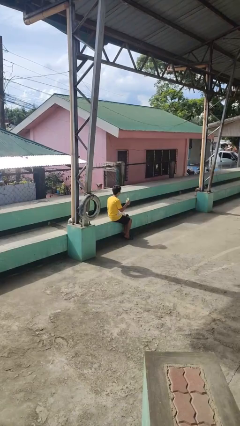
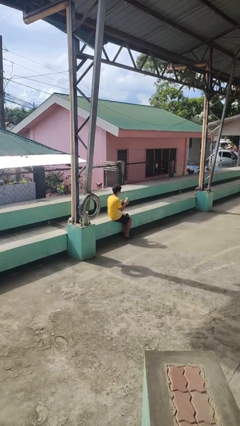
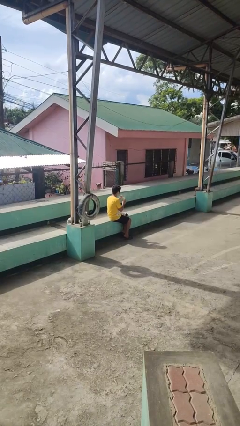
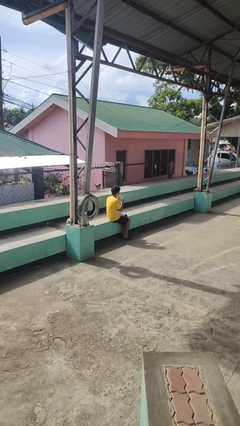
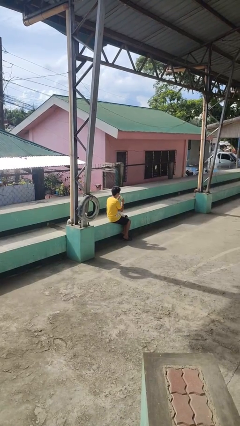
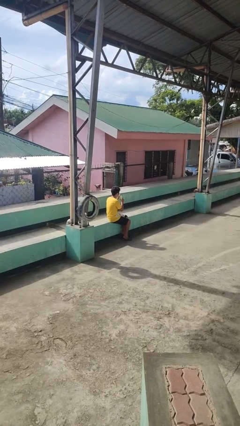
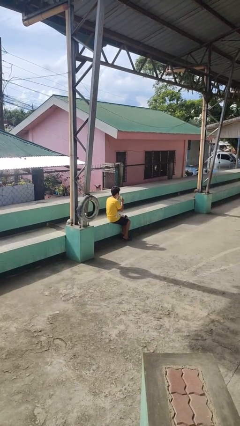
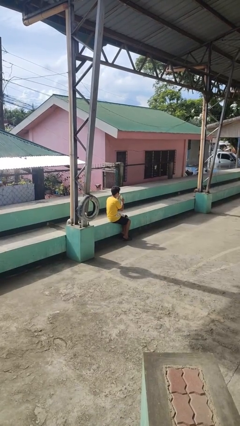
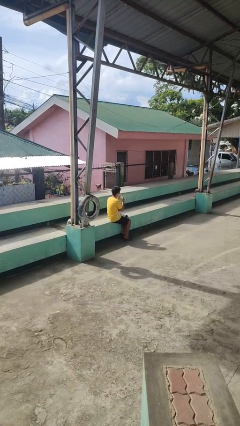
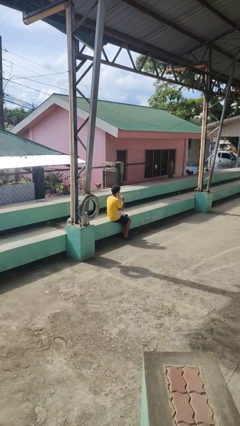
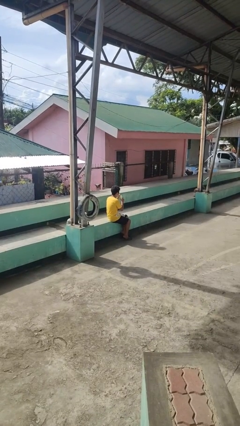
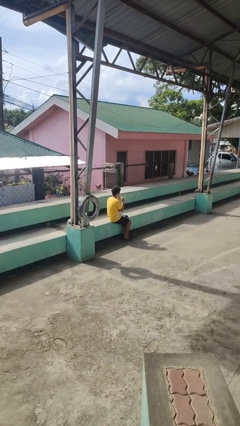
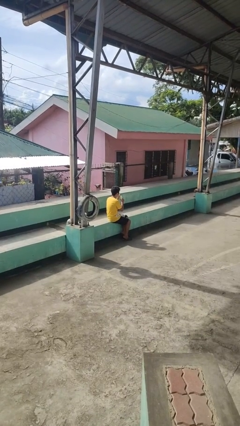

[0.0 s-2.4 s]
person drinks from straw

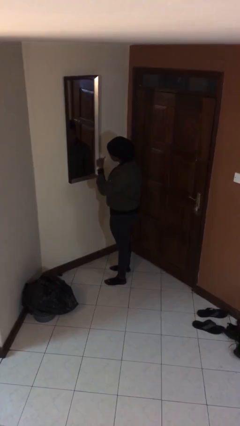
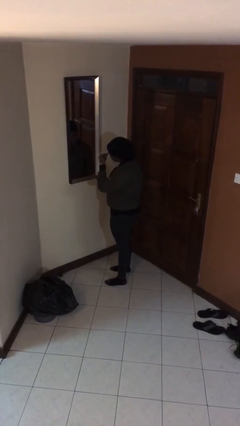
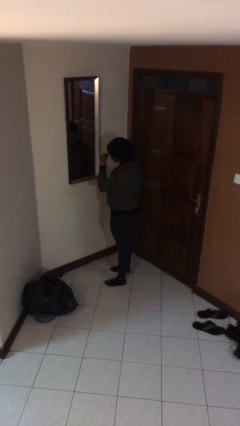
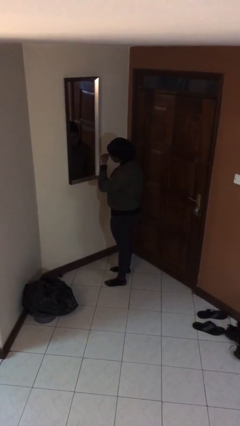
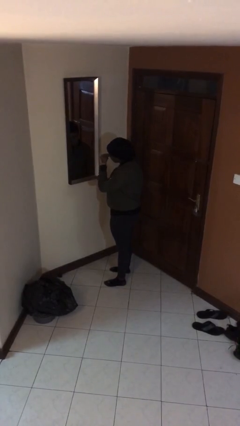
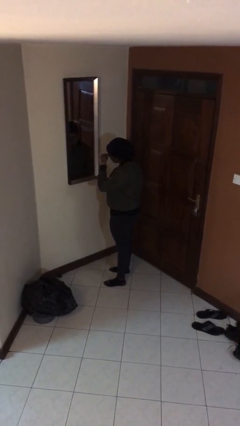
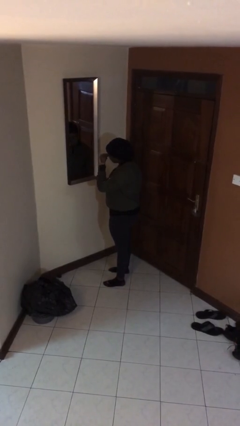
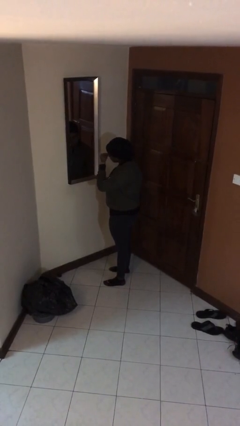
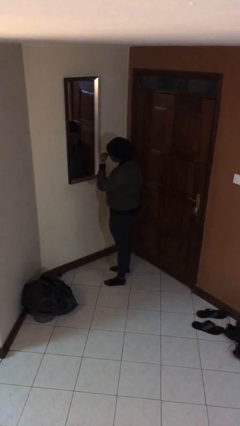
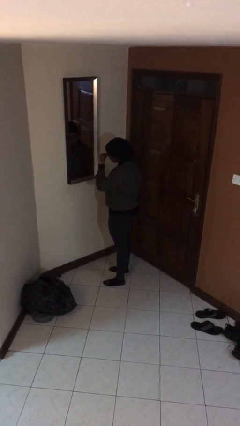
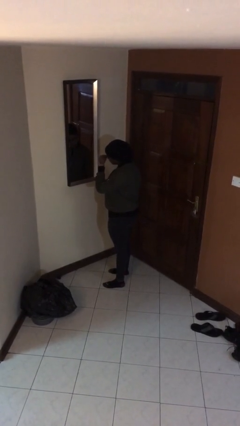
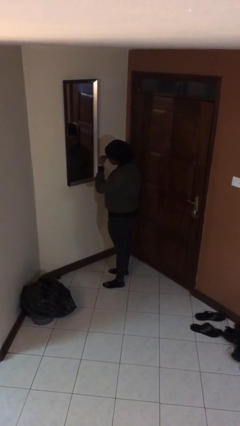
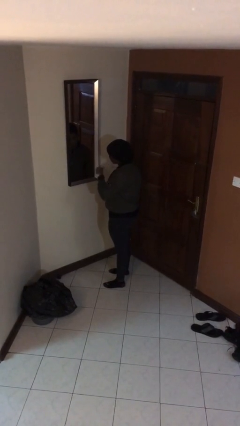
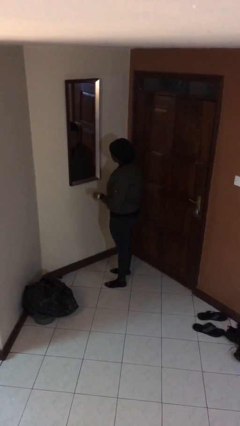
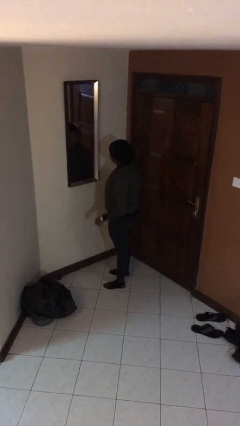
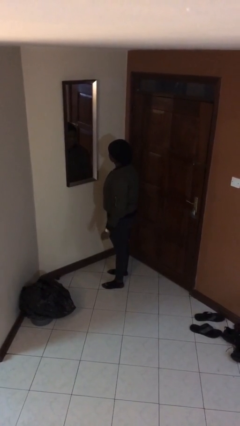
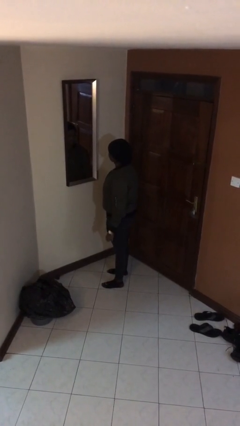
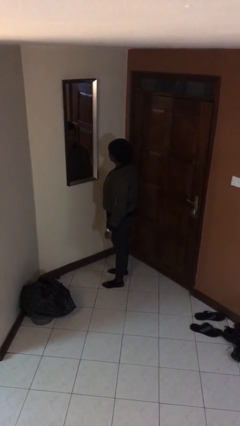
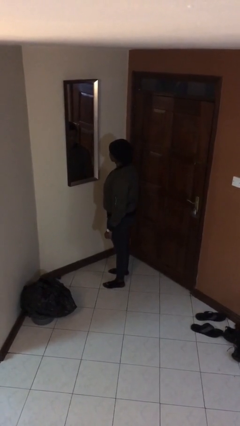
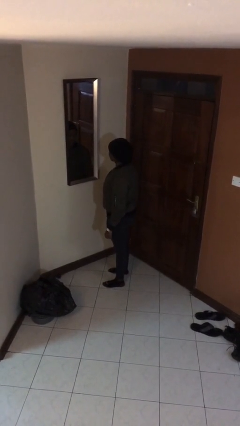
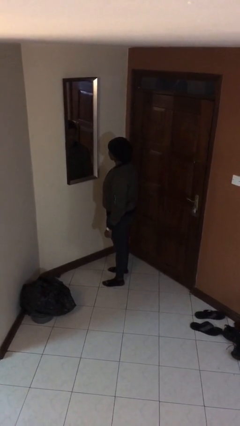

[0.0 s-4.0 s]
person applies eye makeup

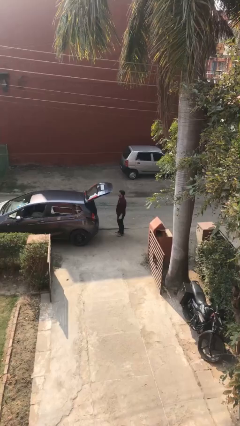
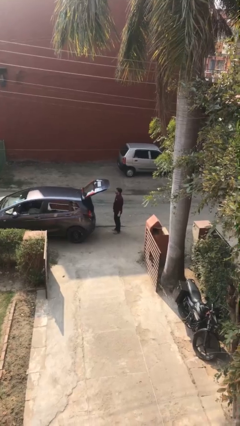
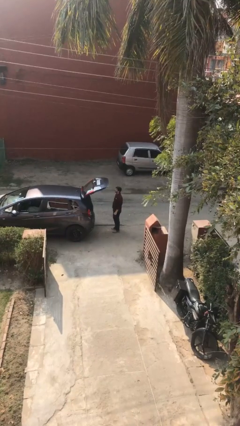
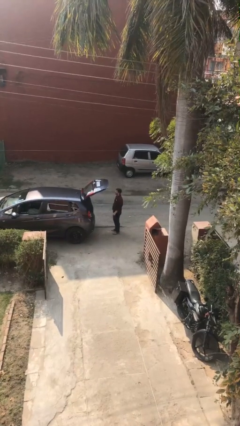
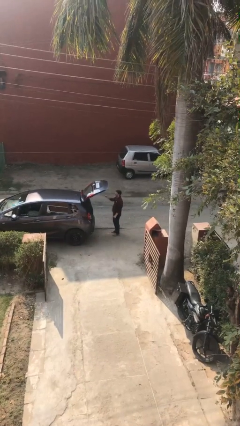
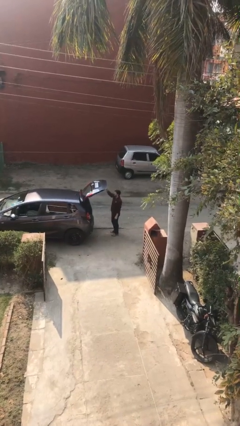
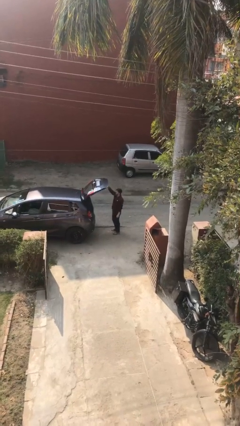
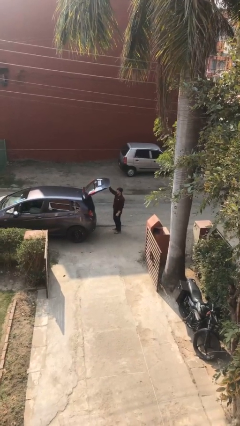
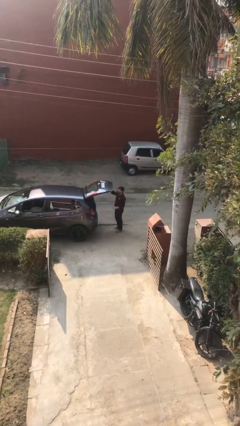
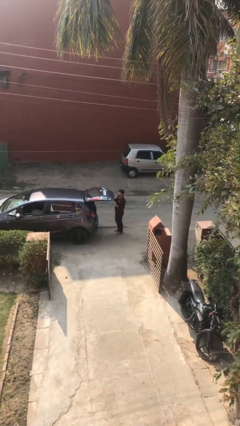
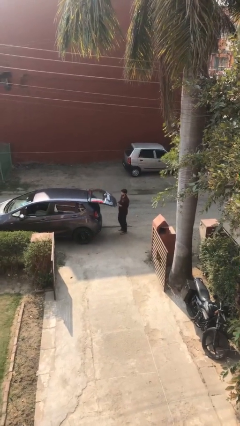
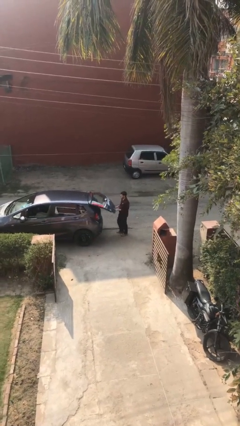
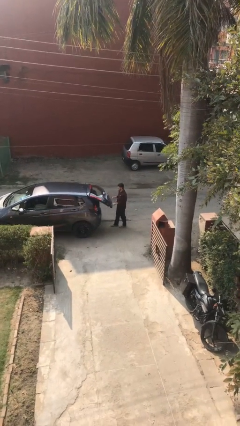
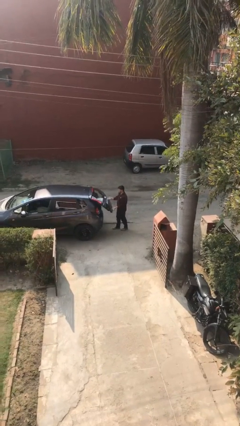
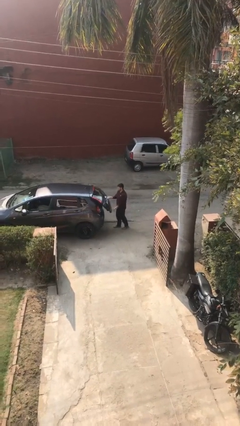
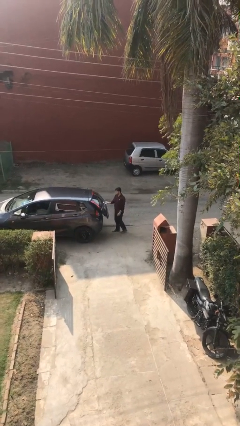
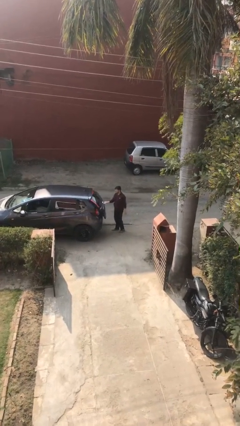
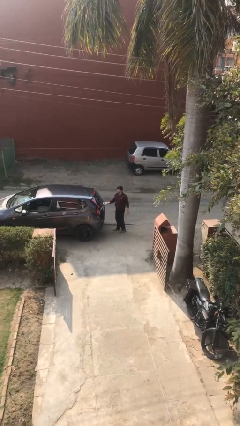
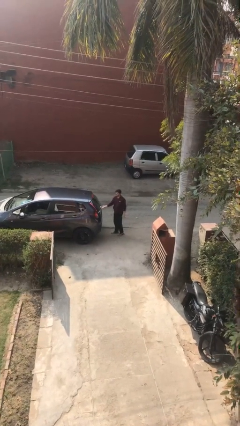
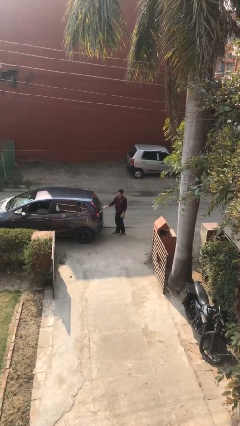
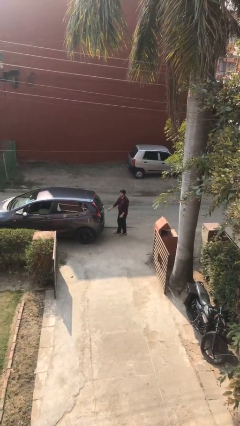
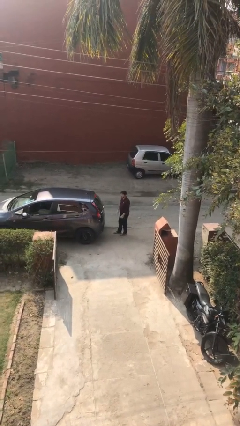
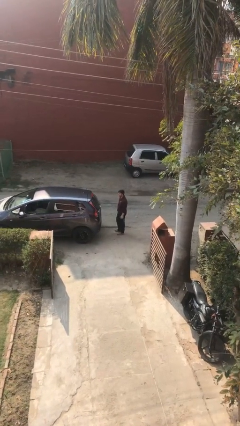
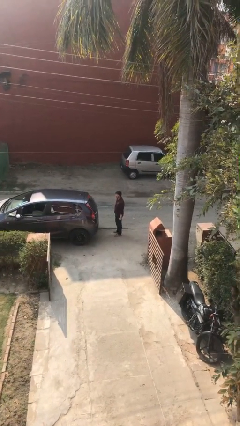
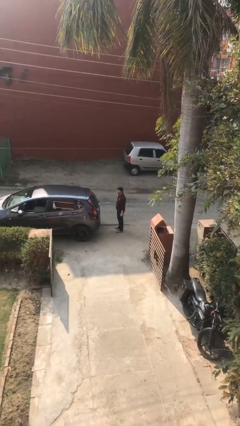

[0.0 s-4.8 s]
person closes car trunk

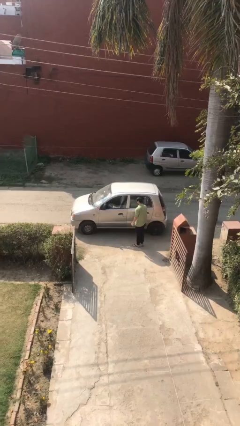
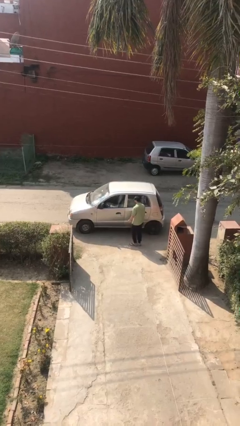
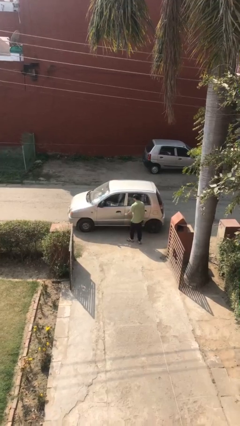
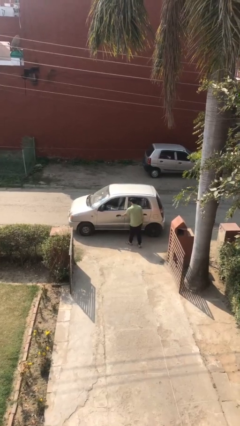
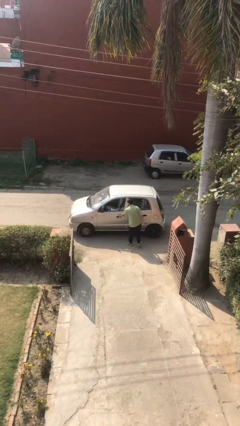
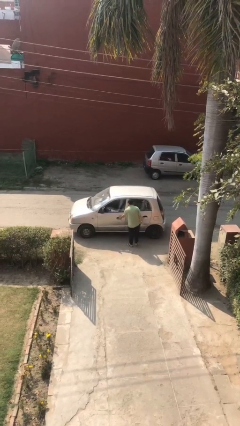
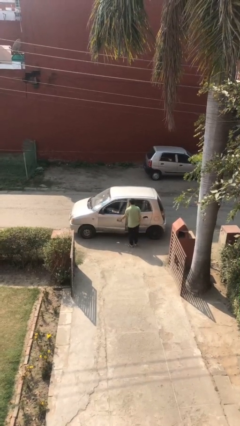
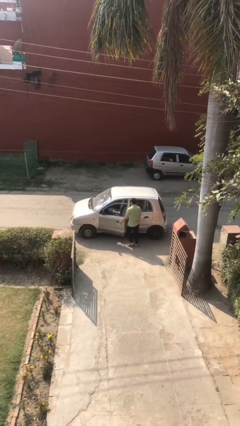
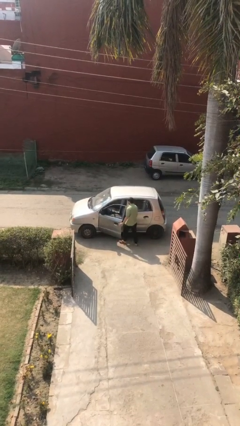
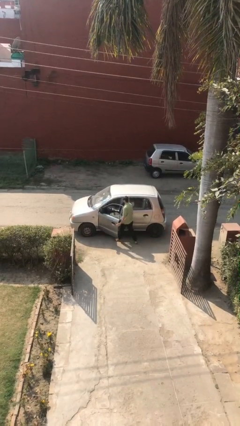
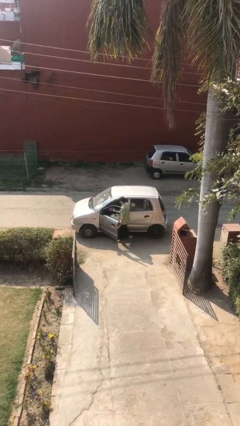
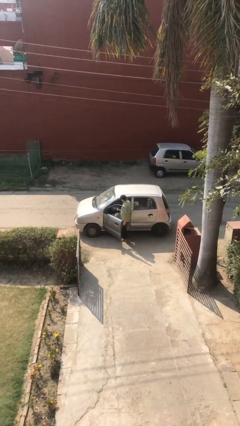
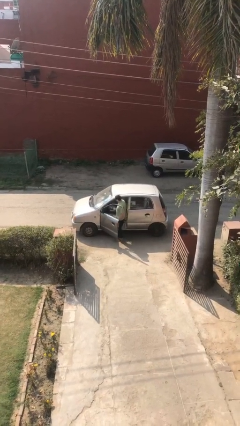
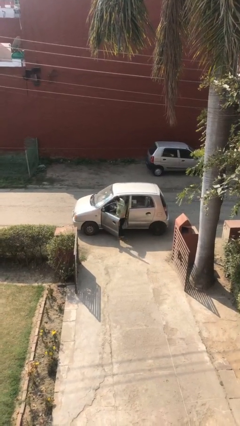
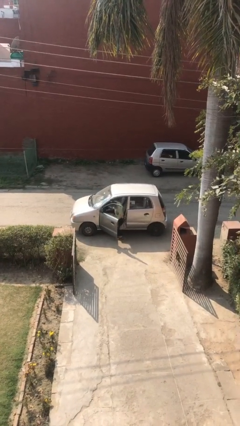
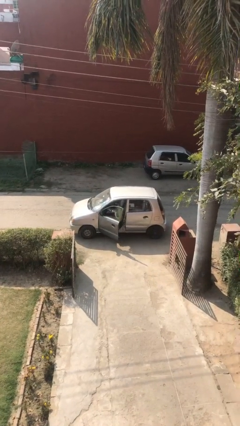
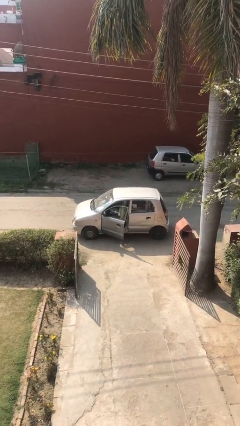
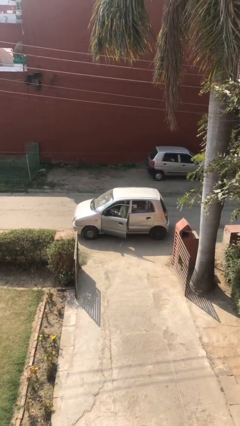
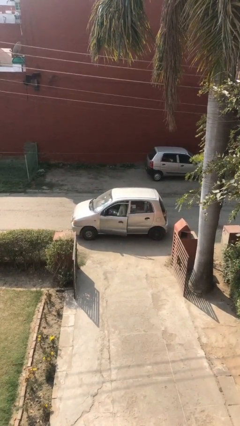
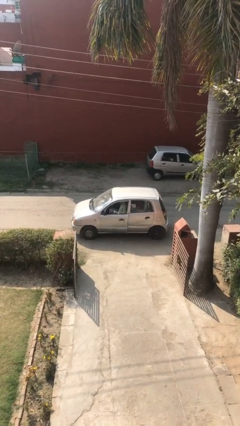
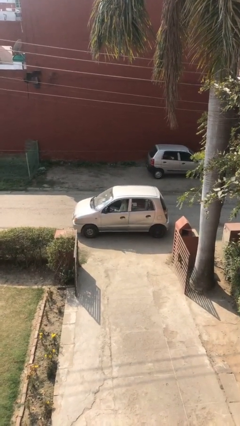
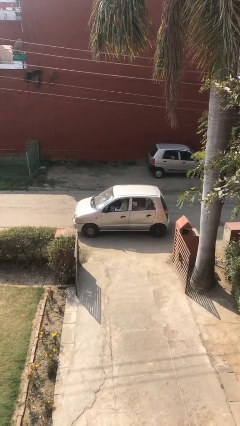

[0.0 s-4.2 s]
car picks up person

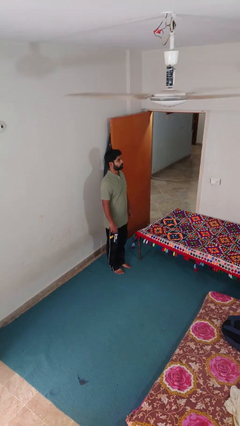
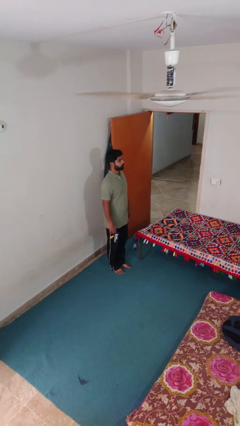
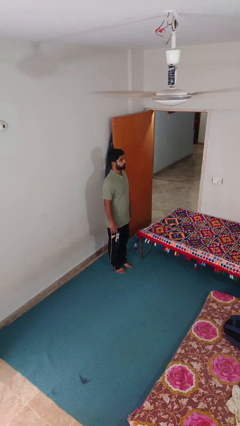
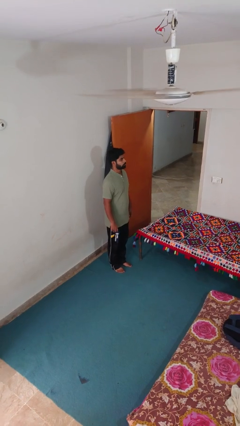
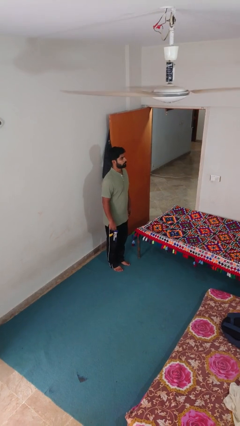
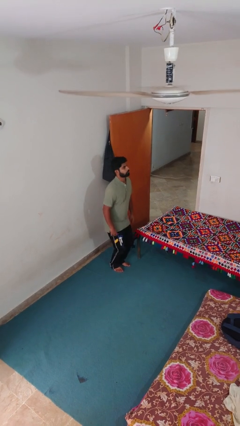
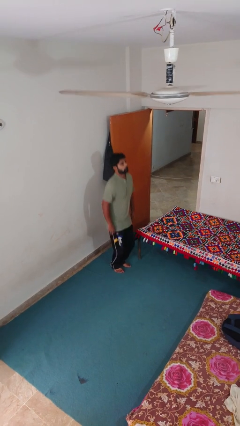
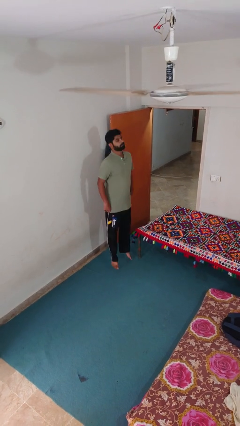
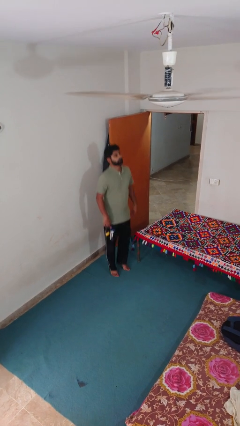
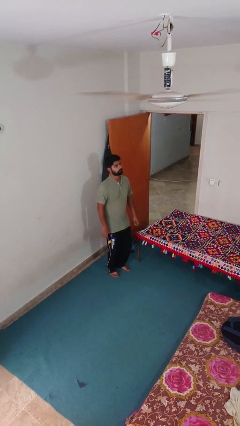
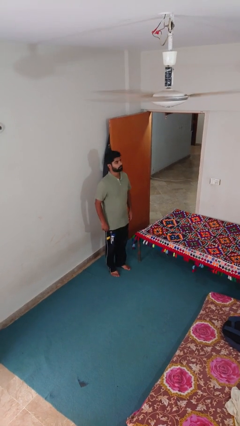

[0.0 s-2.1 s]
person jumps

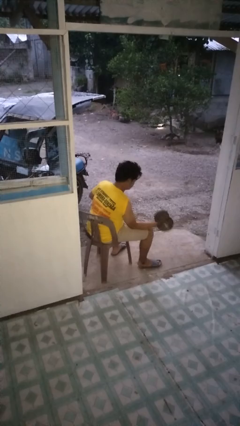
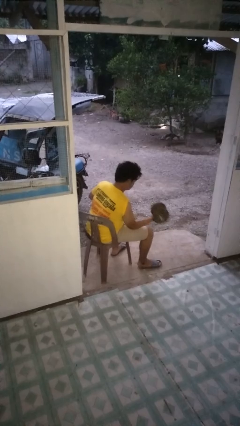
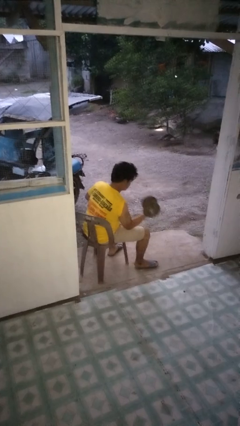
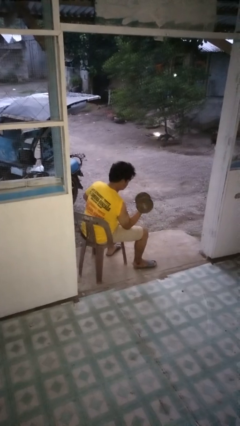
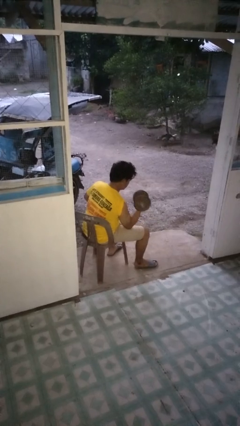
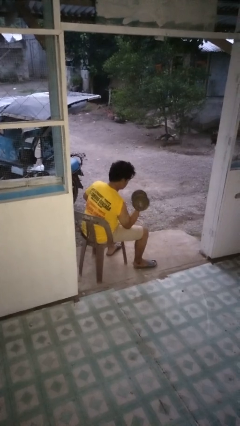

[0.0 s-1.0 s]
person lifts dumbbells
